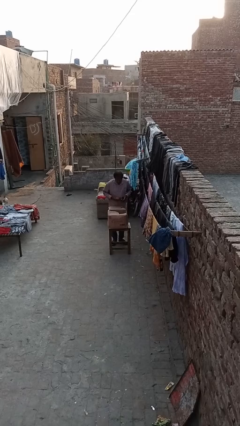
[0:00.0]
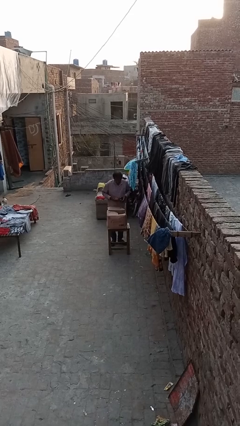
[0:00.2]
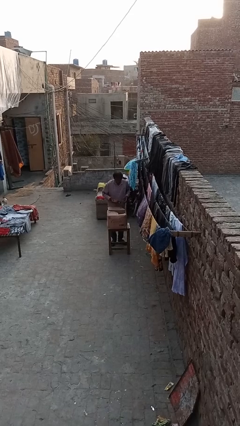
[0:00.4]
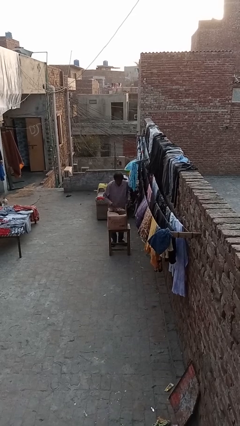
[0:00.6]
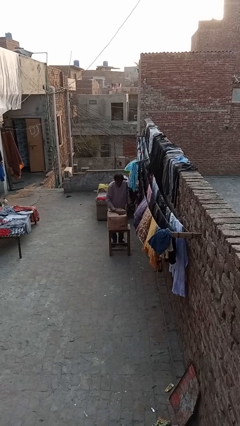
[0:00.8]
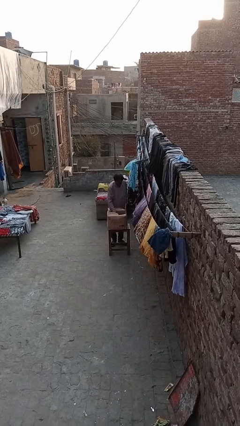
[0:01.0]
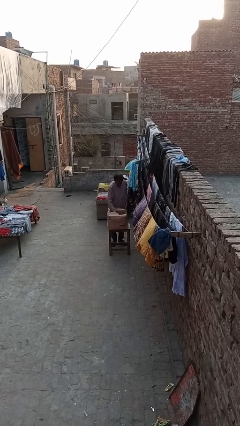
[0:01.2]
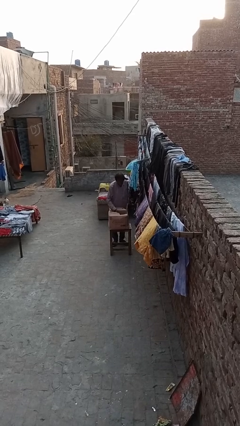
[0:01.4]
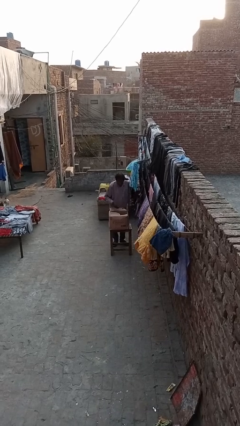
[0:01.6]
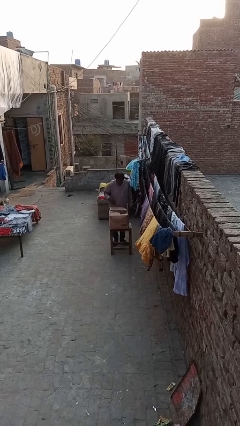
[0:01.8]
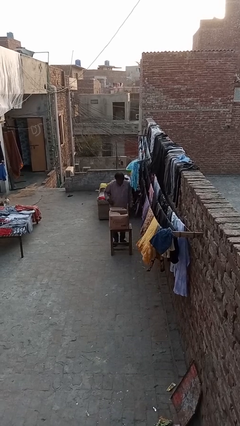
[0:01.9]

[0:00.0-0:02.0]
person puts object into box

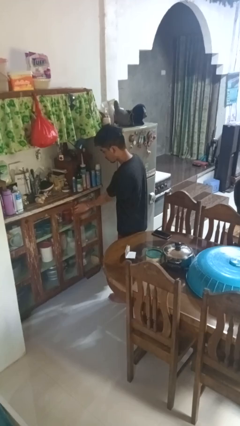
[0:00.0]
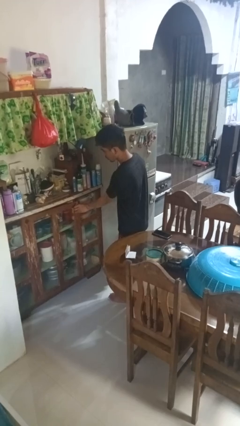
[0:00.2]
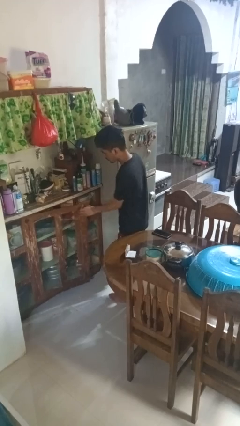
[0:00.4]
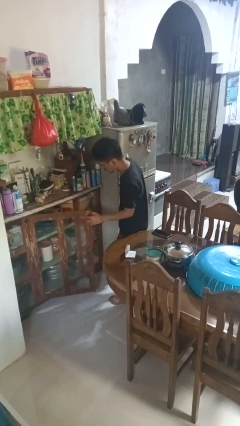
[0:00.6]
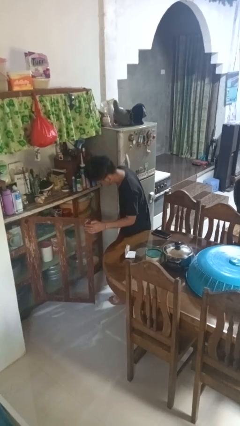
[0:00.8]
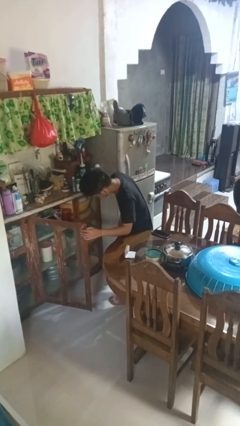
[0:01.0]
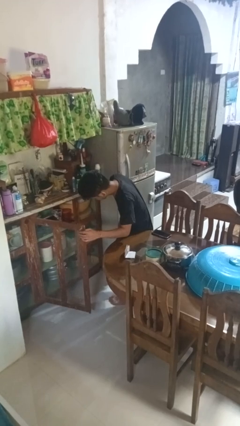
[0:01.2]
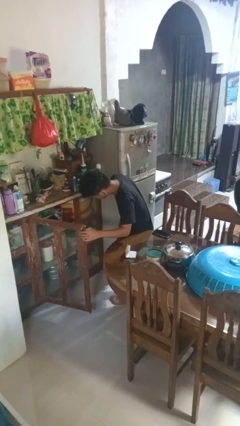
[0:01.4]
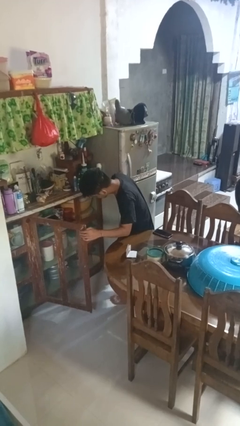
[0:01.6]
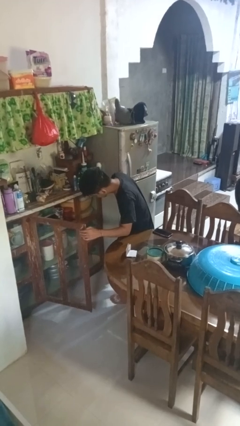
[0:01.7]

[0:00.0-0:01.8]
person opens cabinet

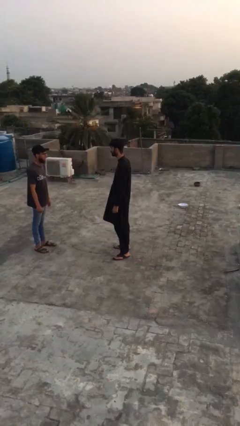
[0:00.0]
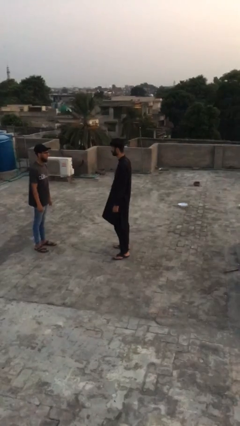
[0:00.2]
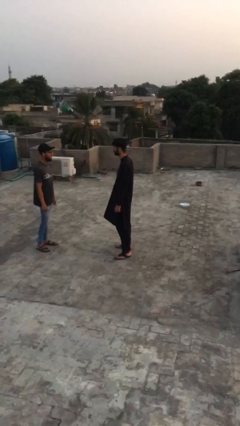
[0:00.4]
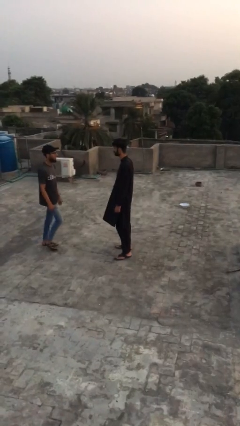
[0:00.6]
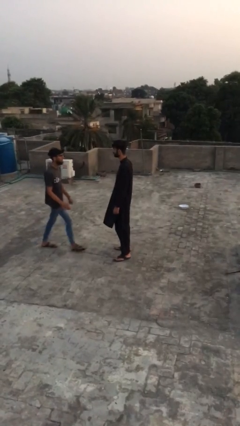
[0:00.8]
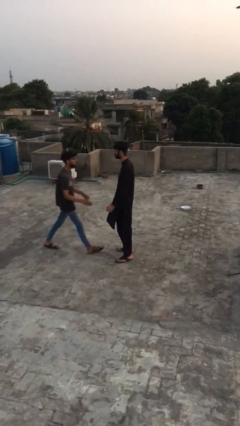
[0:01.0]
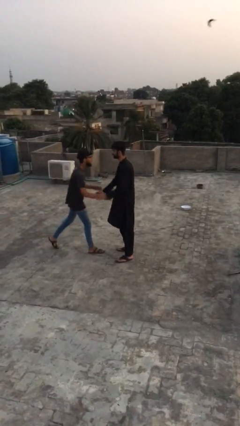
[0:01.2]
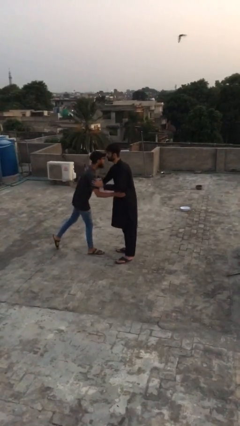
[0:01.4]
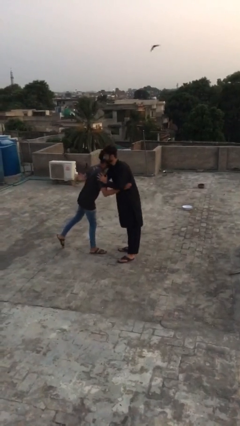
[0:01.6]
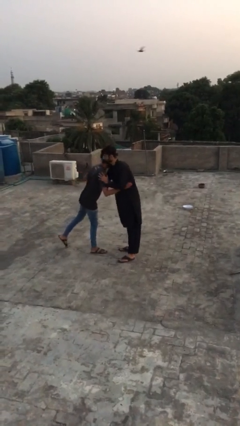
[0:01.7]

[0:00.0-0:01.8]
person embraces person

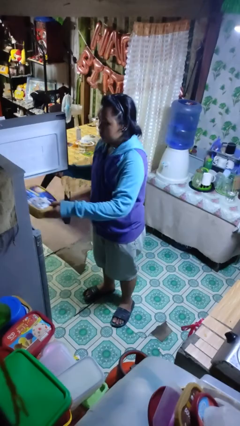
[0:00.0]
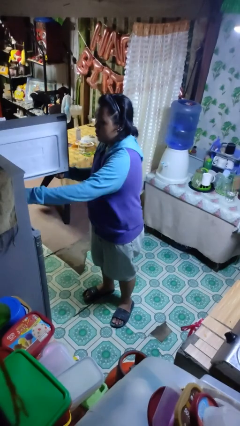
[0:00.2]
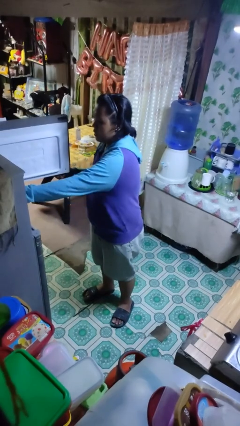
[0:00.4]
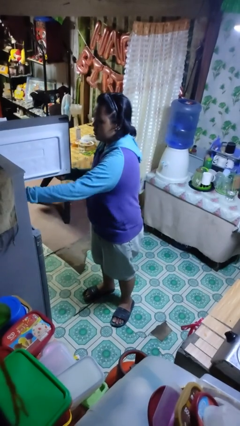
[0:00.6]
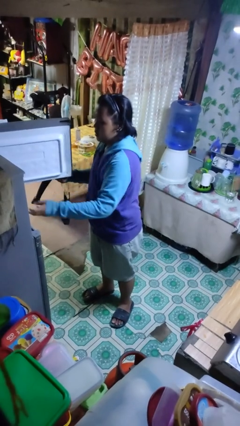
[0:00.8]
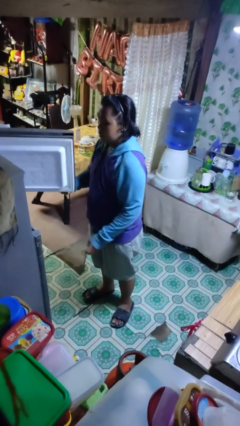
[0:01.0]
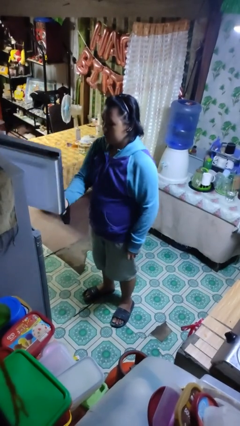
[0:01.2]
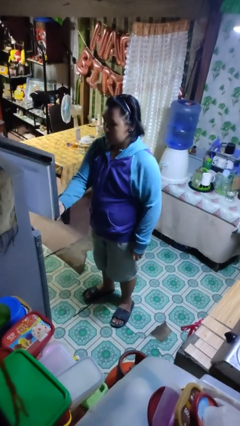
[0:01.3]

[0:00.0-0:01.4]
person puts object into refrigerator

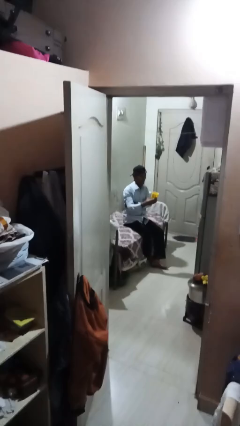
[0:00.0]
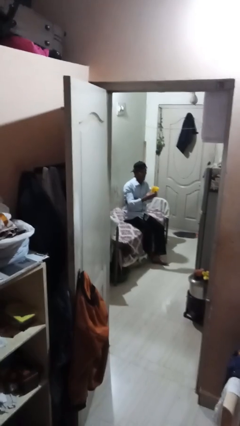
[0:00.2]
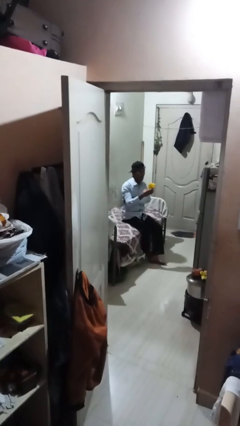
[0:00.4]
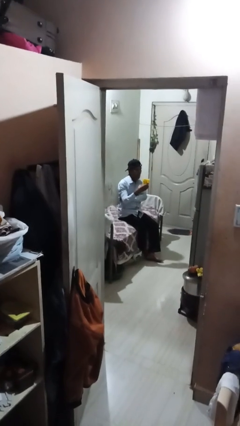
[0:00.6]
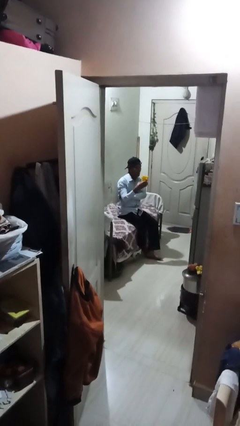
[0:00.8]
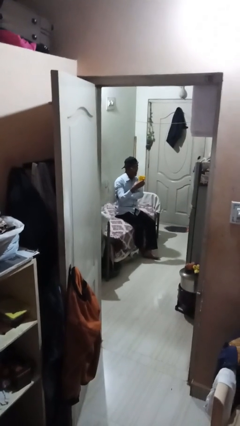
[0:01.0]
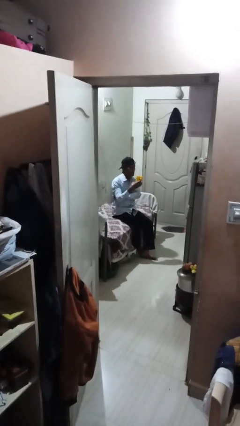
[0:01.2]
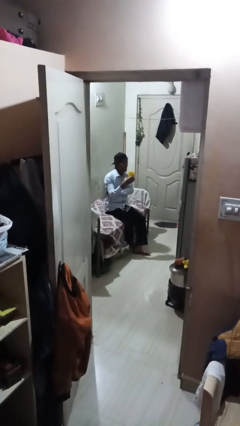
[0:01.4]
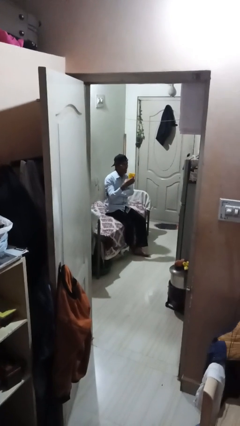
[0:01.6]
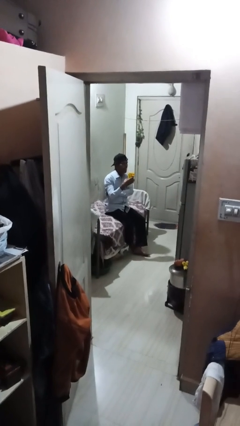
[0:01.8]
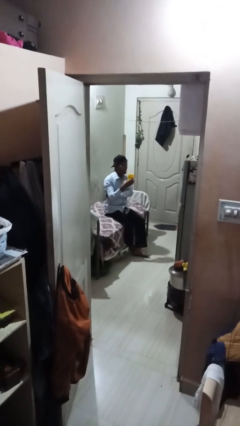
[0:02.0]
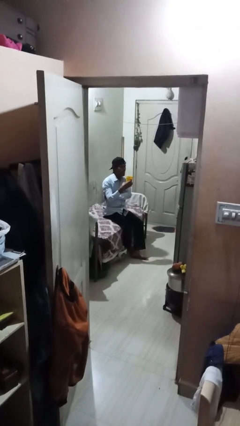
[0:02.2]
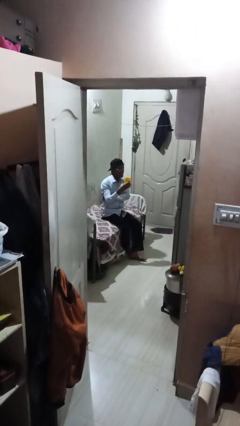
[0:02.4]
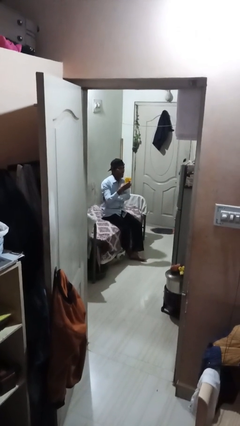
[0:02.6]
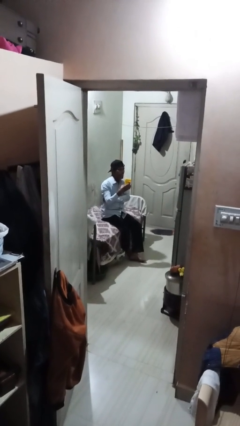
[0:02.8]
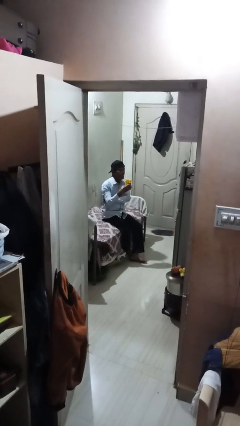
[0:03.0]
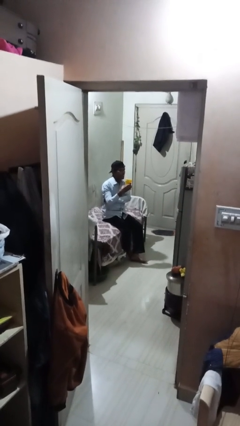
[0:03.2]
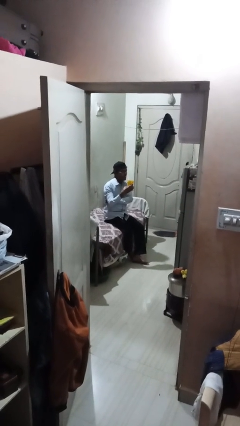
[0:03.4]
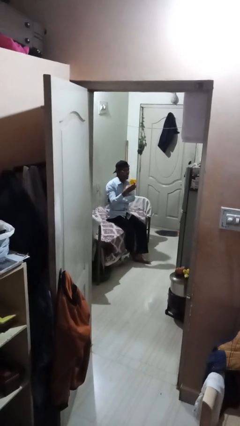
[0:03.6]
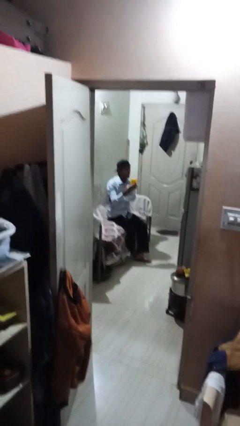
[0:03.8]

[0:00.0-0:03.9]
person drinks from straw

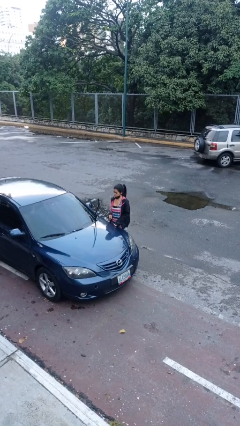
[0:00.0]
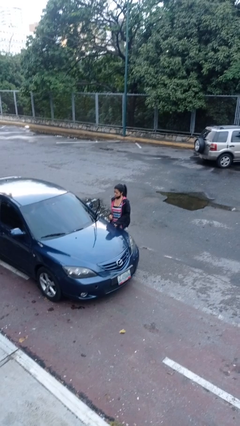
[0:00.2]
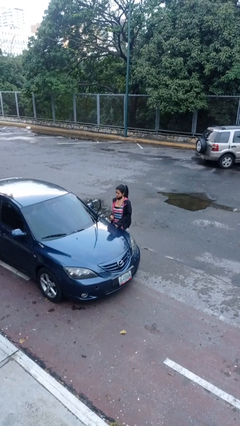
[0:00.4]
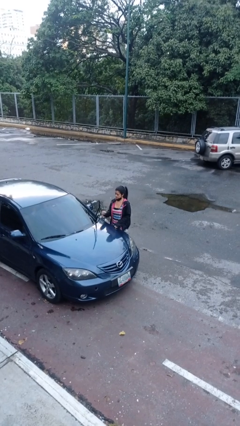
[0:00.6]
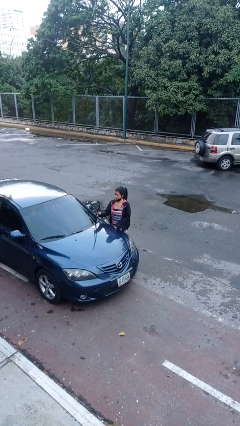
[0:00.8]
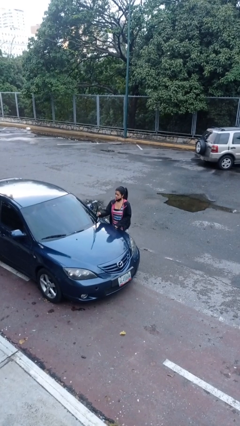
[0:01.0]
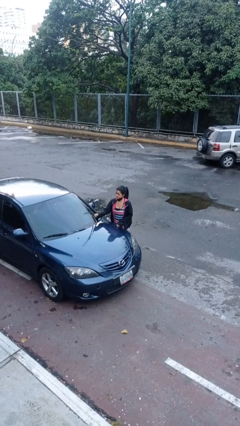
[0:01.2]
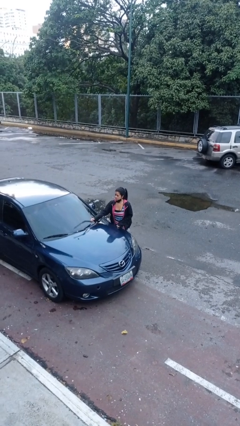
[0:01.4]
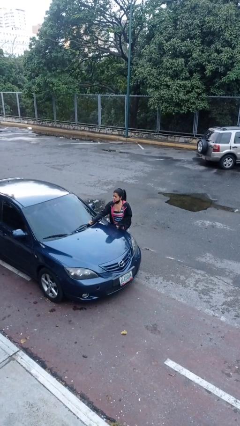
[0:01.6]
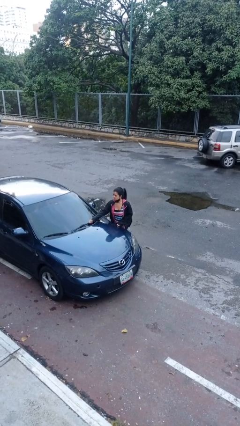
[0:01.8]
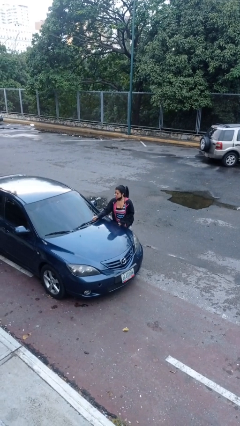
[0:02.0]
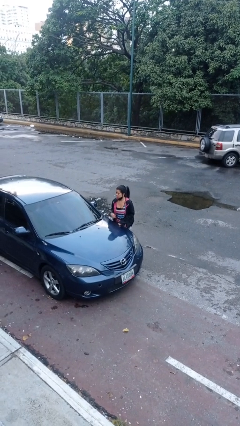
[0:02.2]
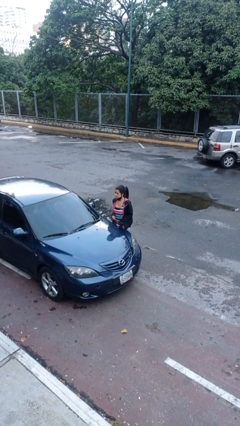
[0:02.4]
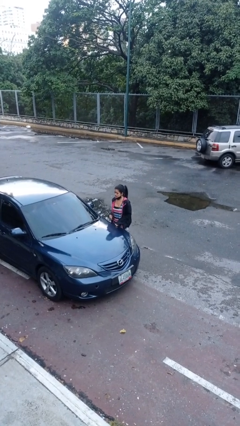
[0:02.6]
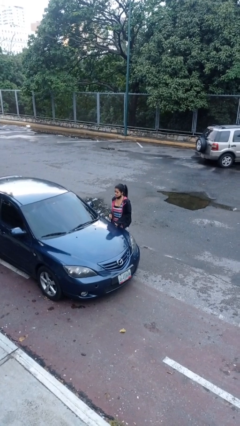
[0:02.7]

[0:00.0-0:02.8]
person flips down car wipers

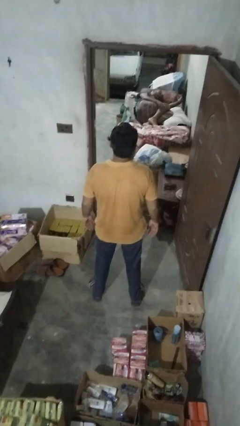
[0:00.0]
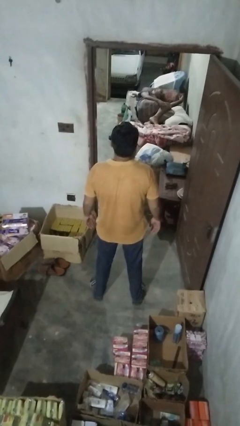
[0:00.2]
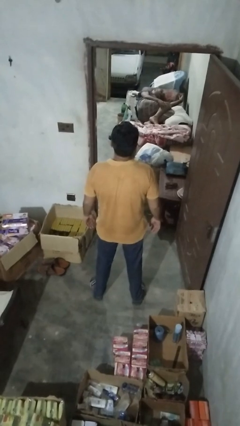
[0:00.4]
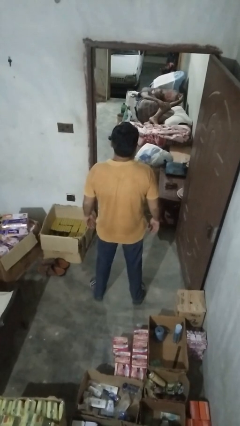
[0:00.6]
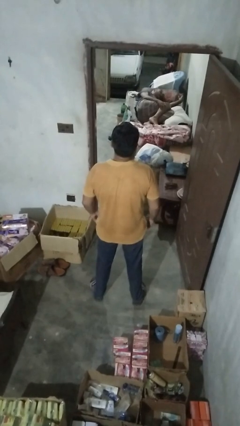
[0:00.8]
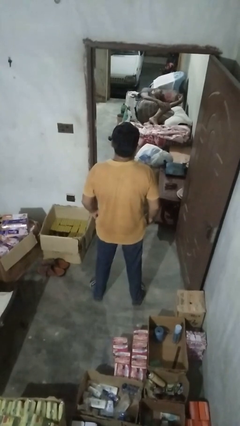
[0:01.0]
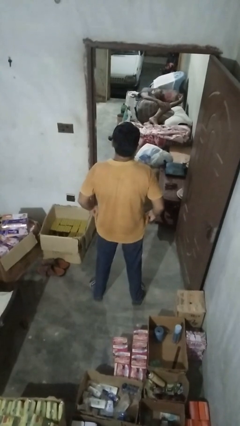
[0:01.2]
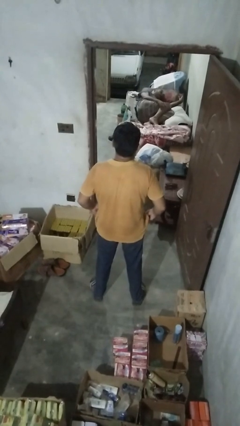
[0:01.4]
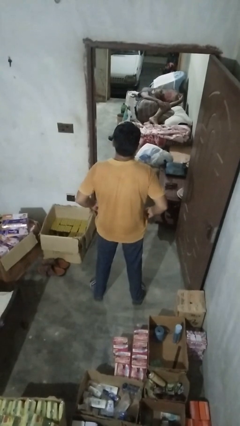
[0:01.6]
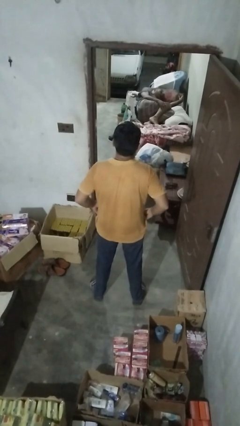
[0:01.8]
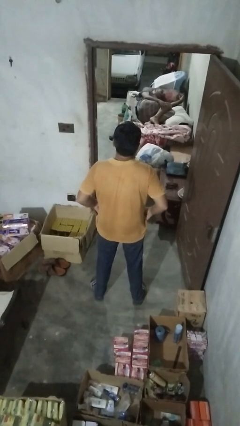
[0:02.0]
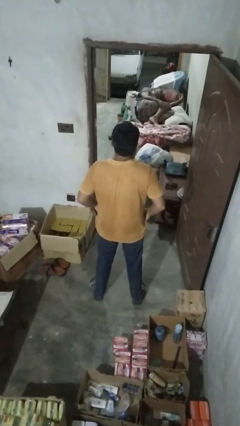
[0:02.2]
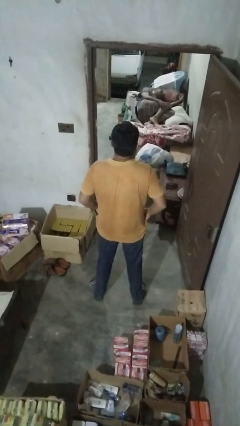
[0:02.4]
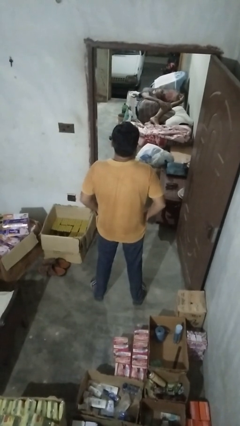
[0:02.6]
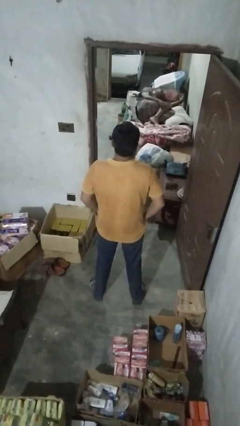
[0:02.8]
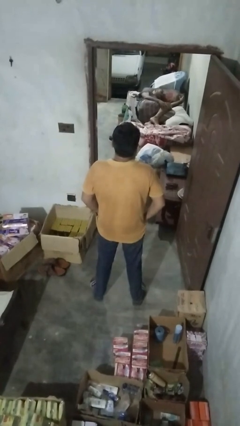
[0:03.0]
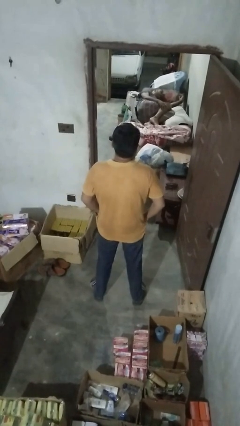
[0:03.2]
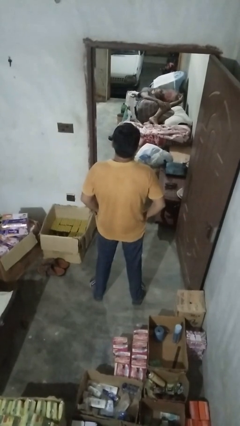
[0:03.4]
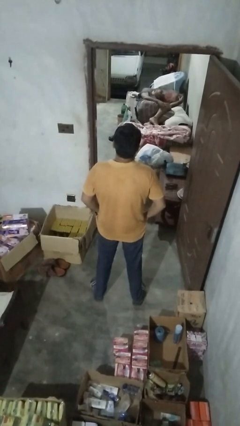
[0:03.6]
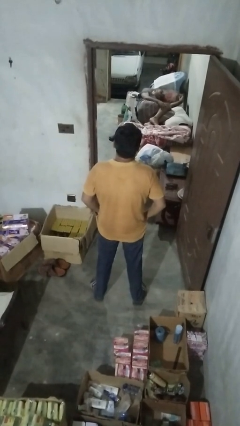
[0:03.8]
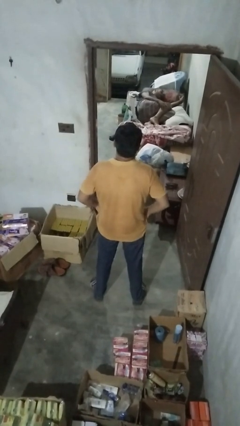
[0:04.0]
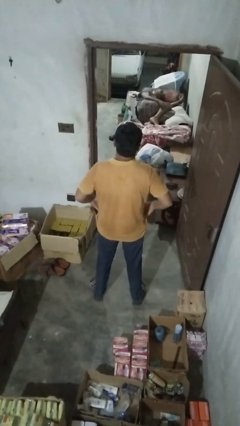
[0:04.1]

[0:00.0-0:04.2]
person puts hands in back pockets
